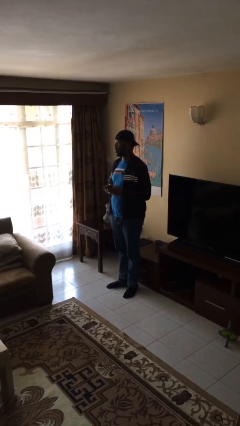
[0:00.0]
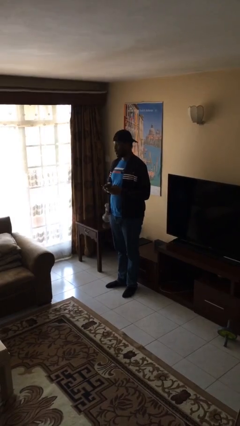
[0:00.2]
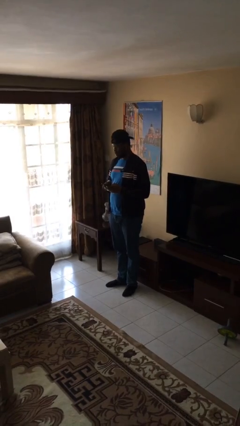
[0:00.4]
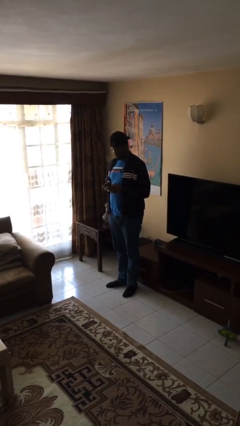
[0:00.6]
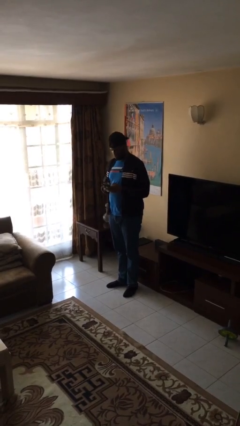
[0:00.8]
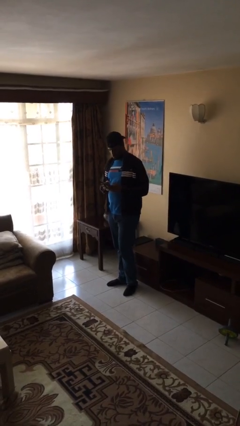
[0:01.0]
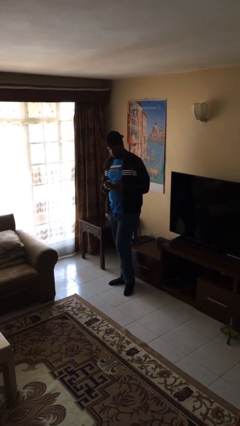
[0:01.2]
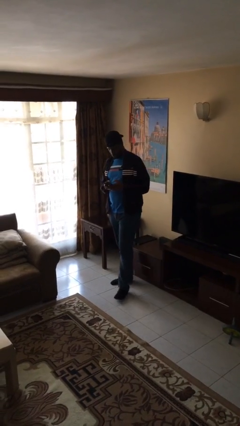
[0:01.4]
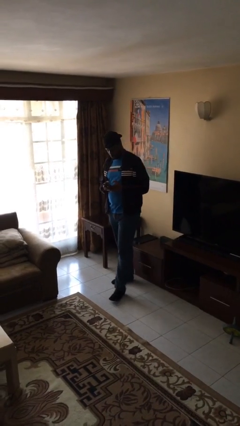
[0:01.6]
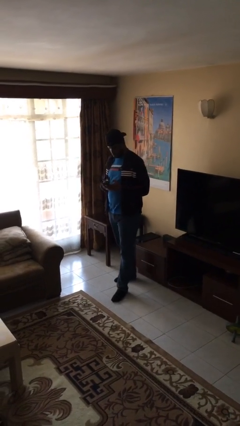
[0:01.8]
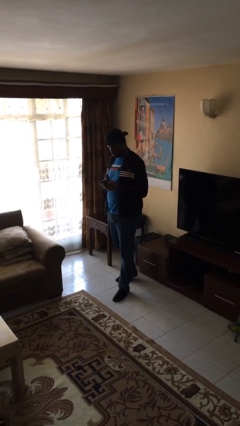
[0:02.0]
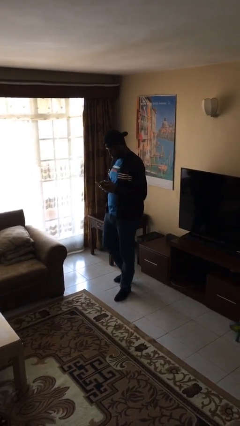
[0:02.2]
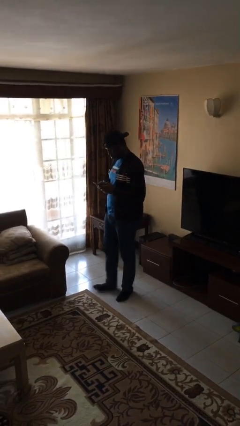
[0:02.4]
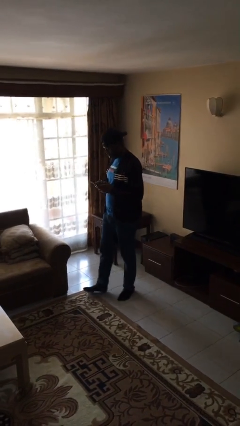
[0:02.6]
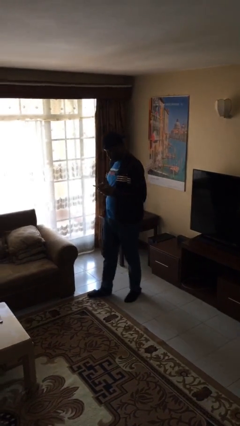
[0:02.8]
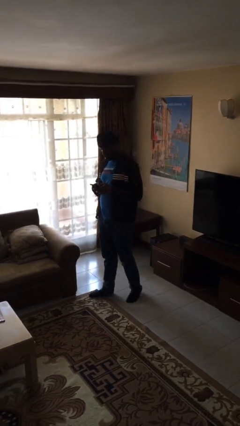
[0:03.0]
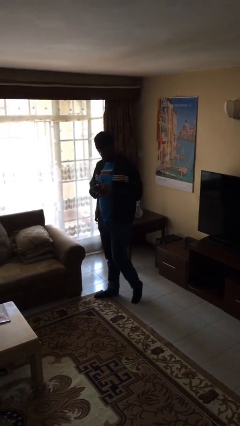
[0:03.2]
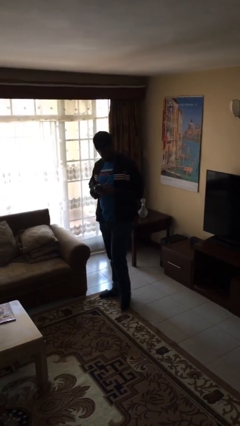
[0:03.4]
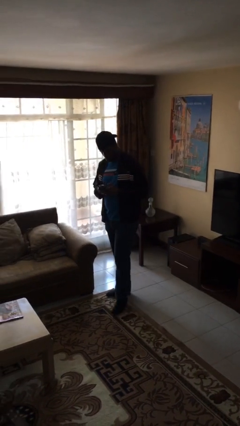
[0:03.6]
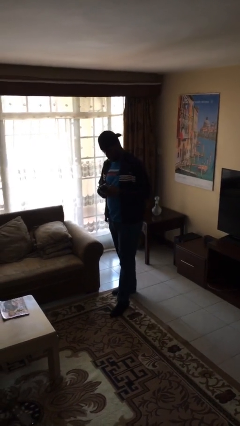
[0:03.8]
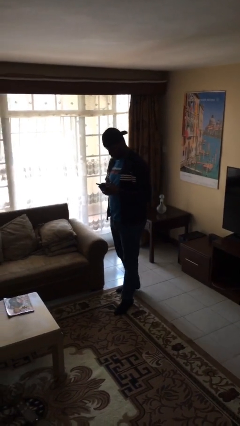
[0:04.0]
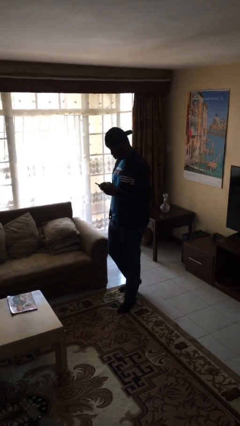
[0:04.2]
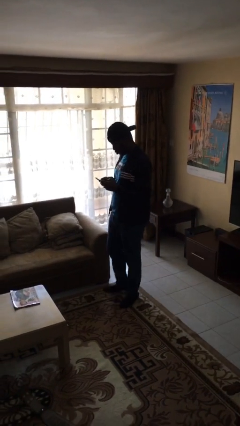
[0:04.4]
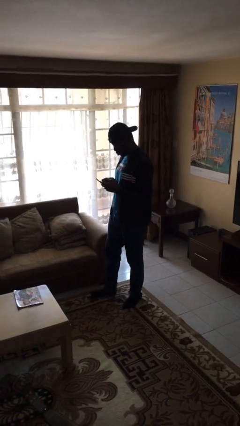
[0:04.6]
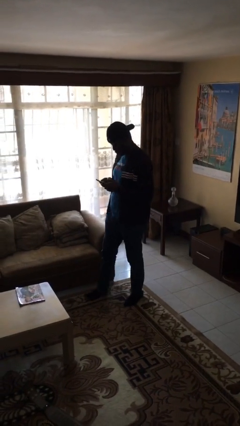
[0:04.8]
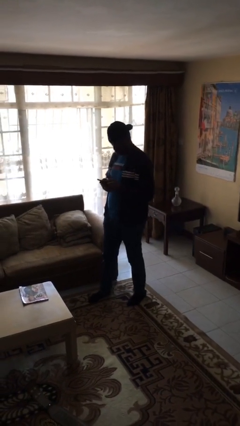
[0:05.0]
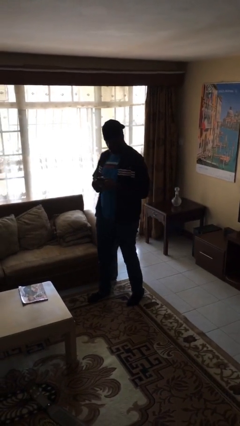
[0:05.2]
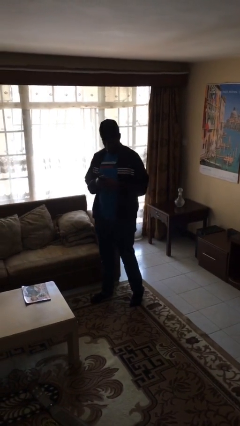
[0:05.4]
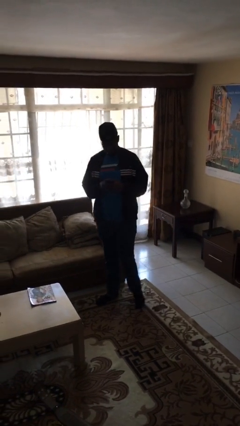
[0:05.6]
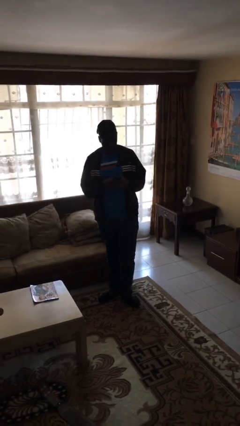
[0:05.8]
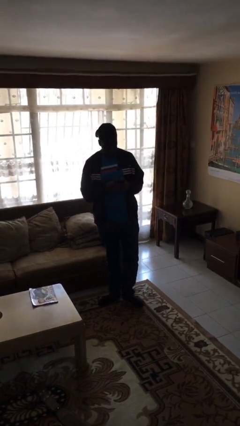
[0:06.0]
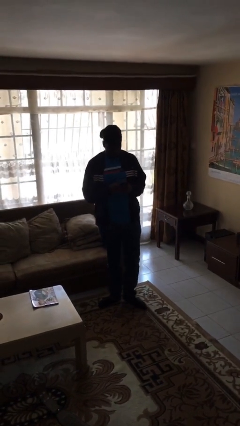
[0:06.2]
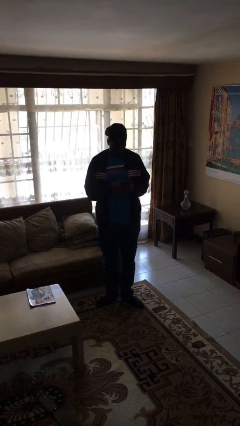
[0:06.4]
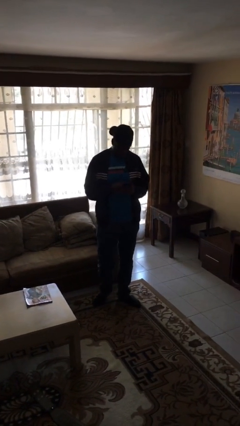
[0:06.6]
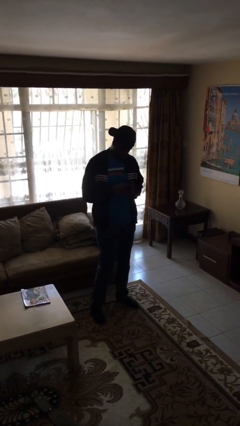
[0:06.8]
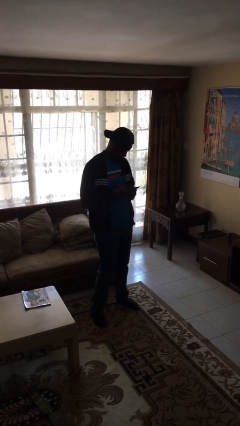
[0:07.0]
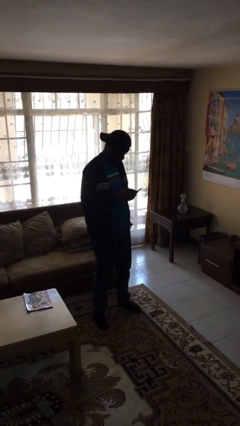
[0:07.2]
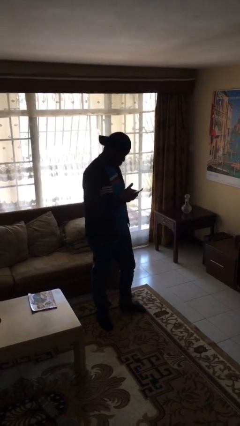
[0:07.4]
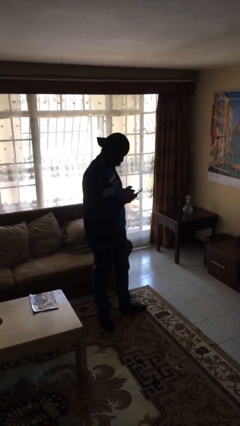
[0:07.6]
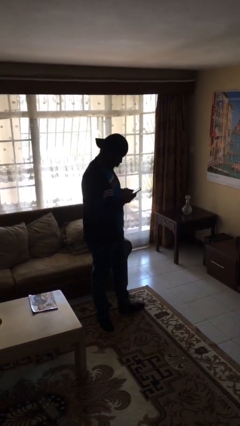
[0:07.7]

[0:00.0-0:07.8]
person texts on phone

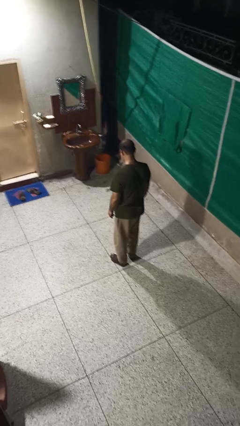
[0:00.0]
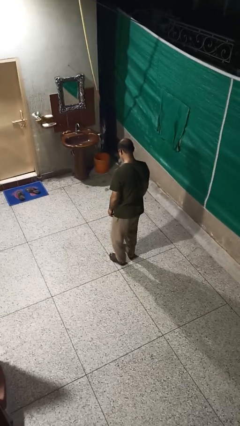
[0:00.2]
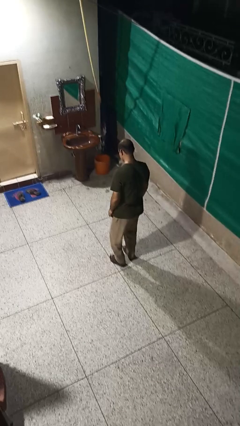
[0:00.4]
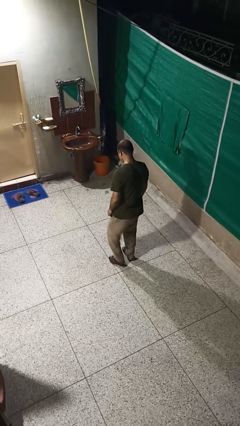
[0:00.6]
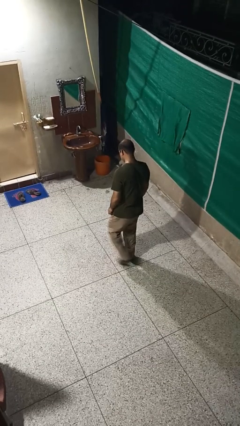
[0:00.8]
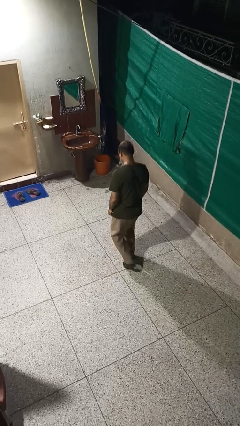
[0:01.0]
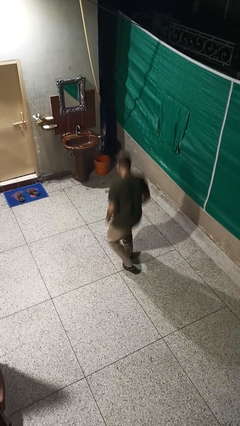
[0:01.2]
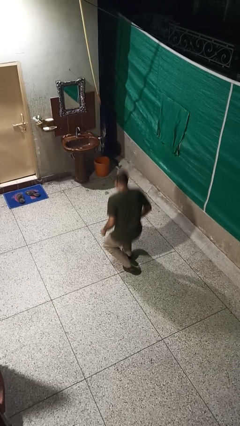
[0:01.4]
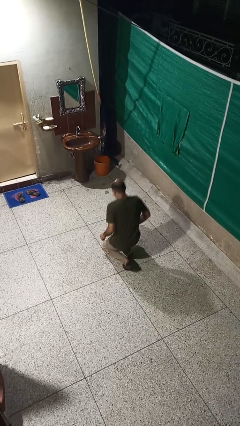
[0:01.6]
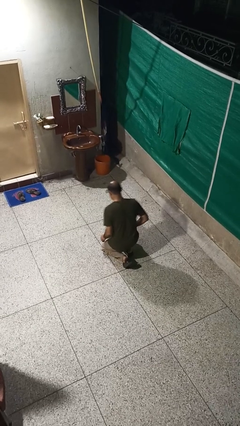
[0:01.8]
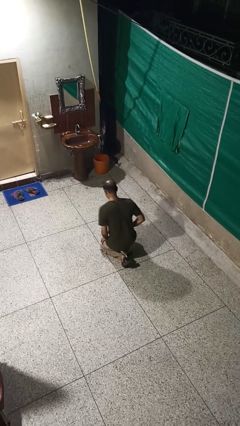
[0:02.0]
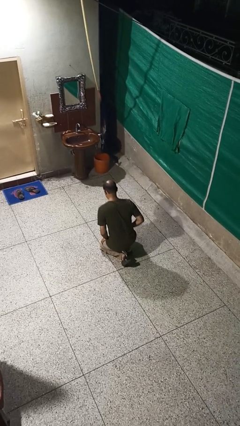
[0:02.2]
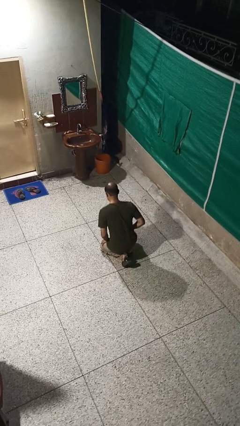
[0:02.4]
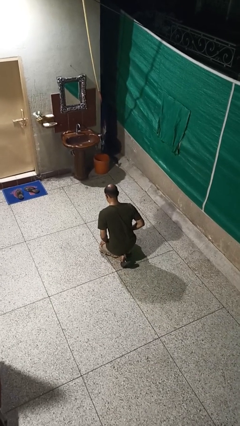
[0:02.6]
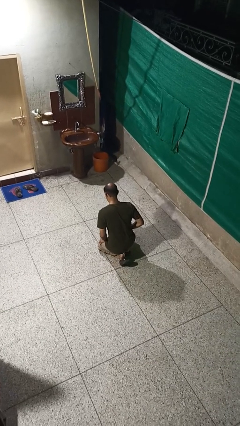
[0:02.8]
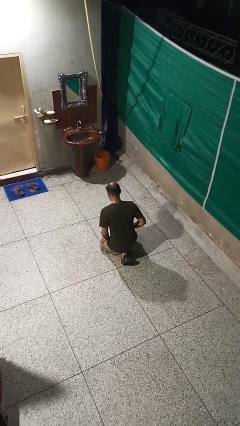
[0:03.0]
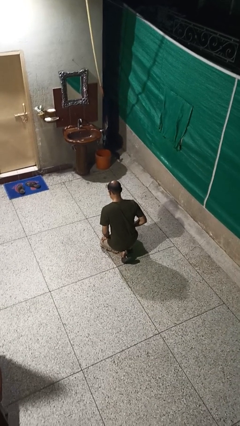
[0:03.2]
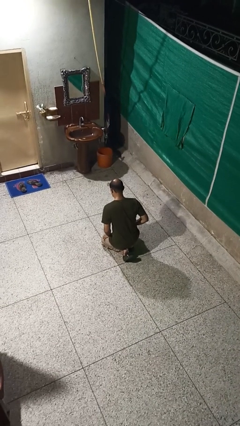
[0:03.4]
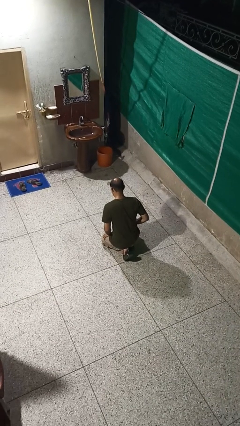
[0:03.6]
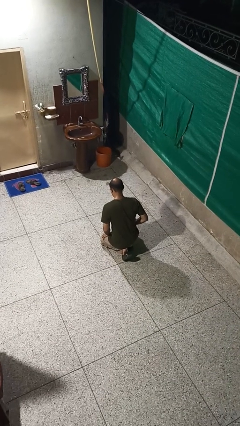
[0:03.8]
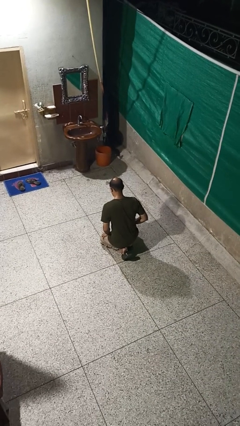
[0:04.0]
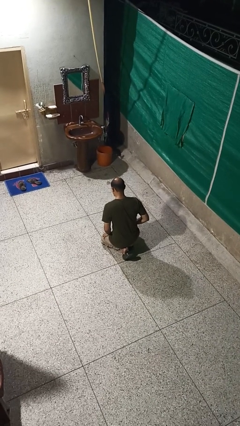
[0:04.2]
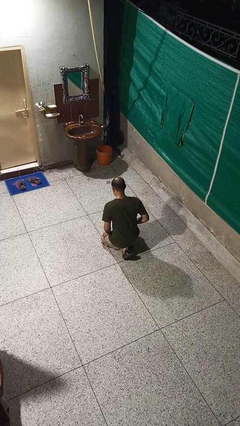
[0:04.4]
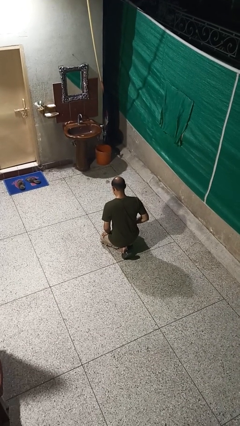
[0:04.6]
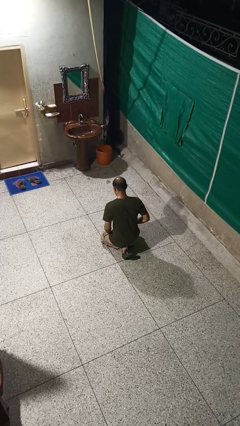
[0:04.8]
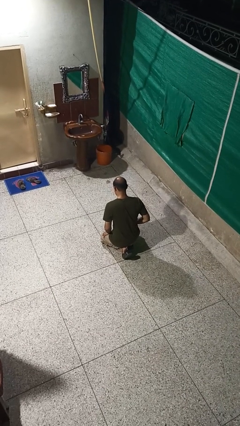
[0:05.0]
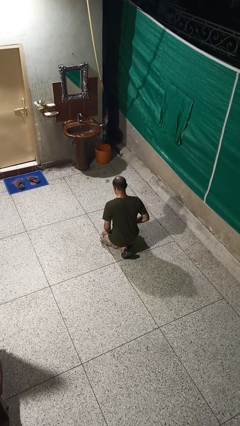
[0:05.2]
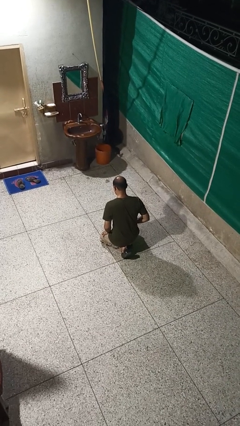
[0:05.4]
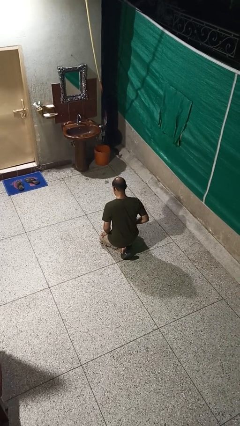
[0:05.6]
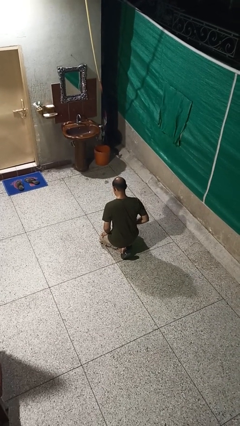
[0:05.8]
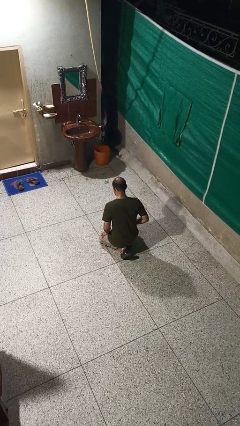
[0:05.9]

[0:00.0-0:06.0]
person kneels

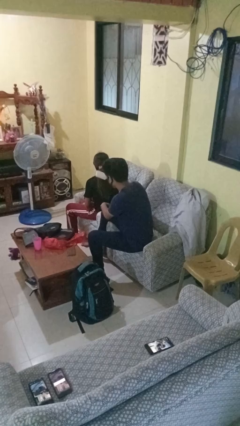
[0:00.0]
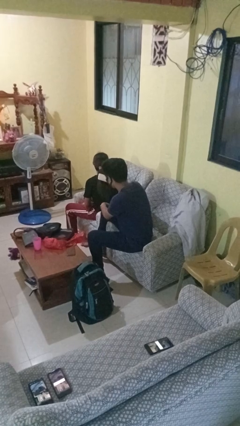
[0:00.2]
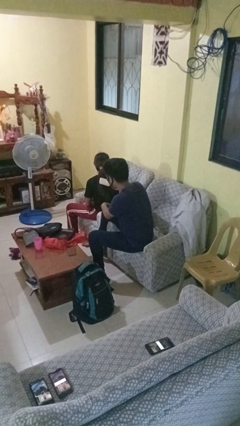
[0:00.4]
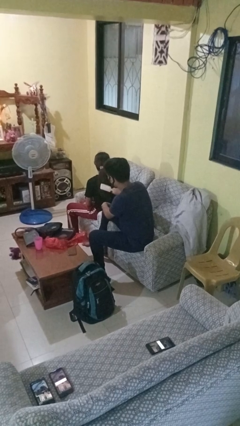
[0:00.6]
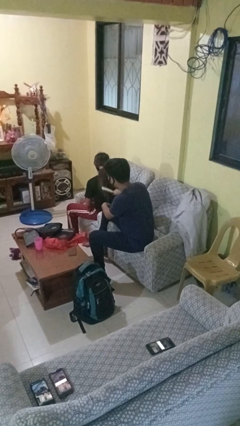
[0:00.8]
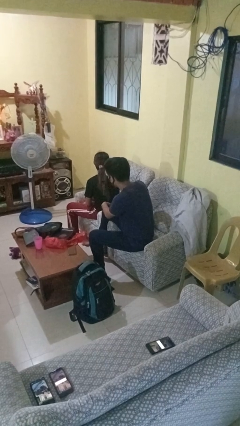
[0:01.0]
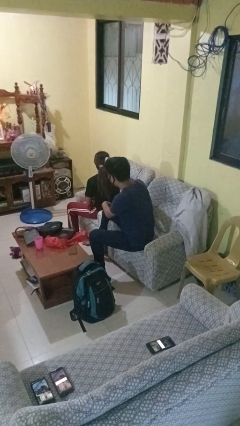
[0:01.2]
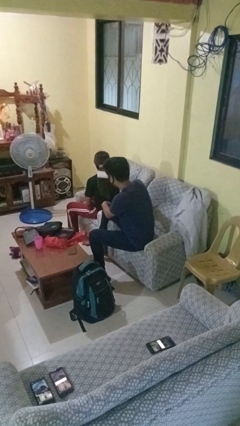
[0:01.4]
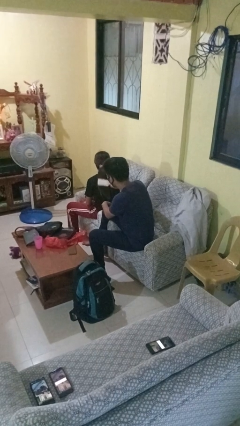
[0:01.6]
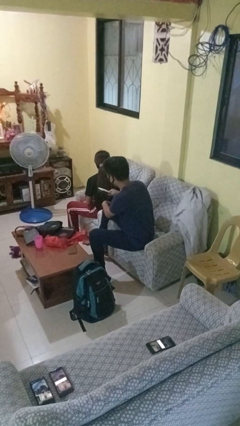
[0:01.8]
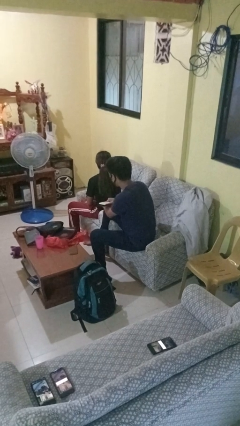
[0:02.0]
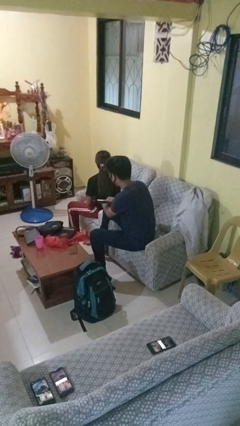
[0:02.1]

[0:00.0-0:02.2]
person brushes hair of person

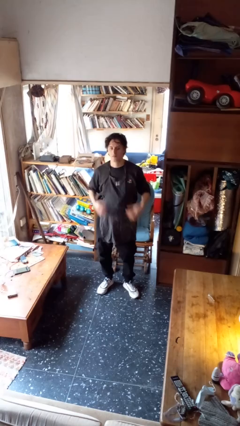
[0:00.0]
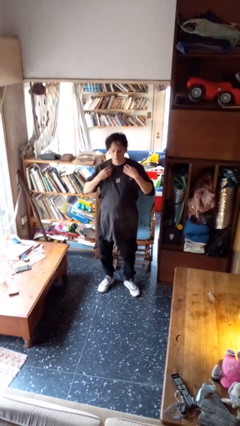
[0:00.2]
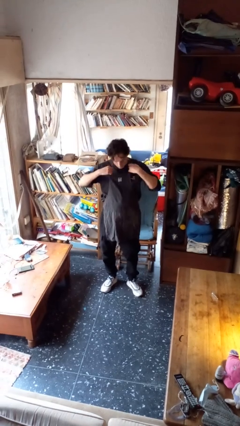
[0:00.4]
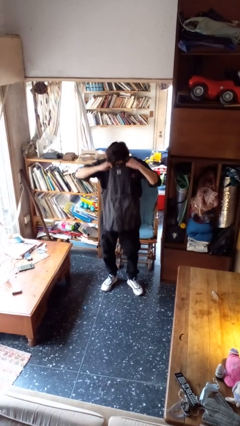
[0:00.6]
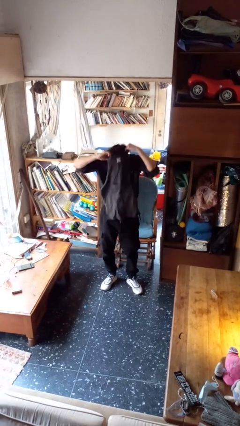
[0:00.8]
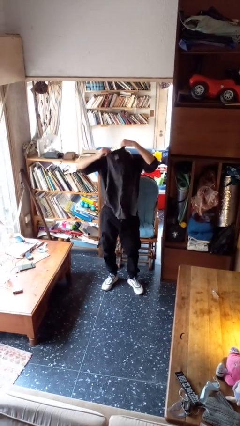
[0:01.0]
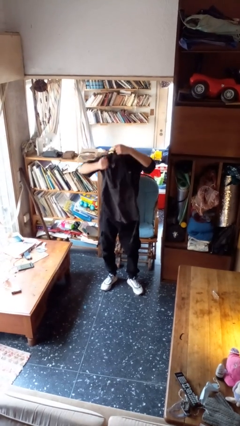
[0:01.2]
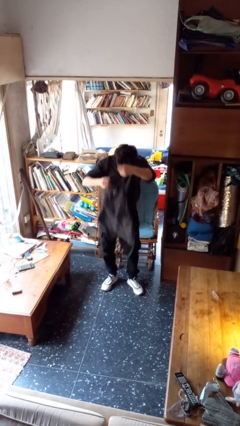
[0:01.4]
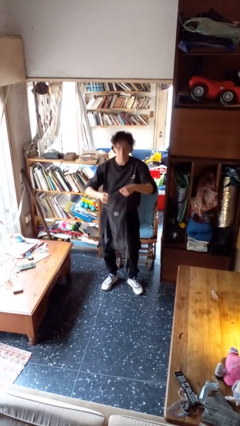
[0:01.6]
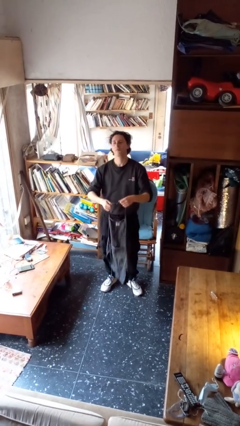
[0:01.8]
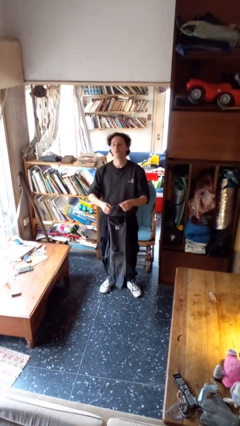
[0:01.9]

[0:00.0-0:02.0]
person takes off apron
